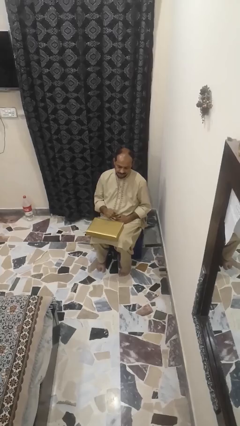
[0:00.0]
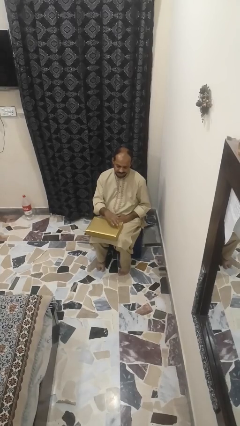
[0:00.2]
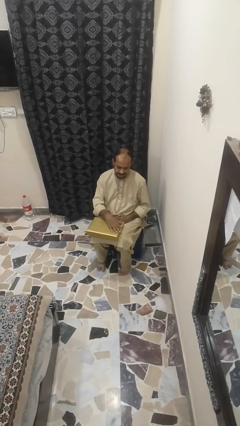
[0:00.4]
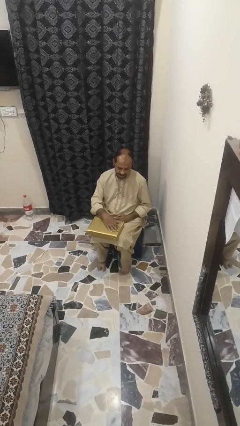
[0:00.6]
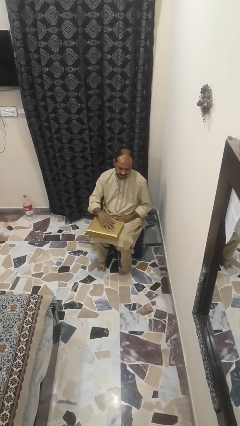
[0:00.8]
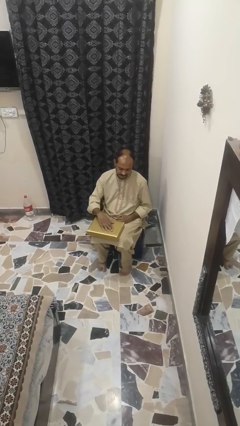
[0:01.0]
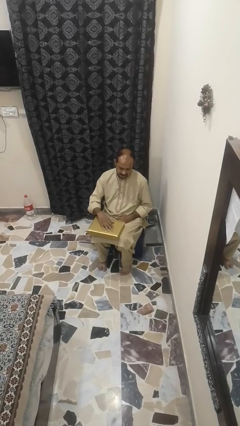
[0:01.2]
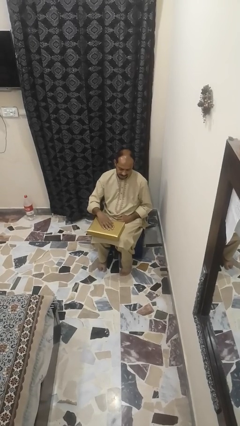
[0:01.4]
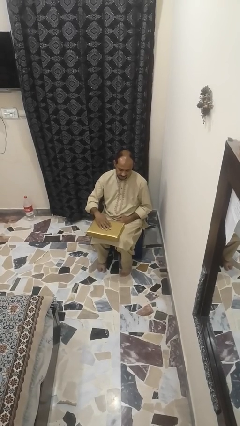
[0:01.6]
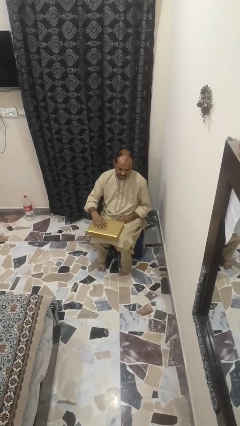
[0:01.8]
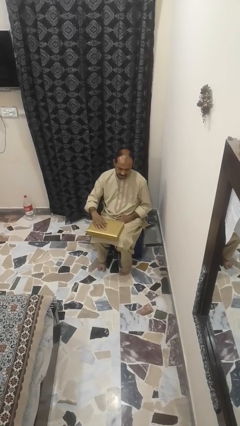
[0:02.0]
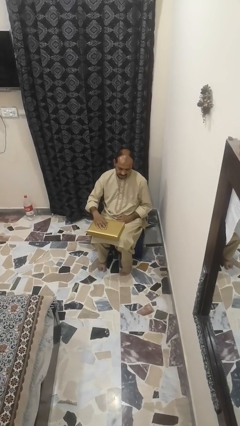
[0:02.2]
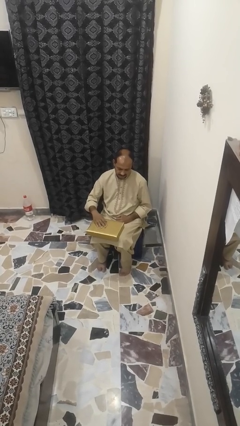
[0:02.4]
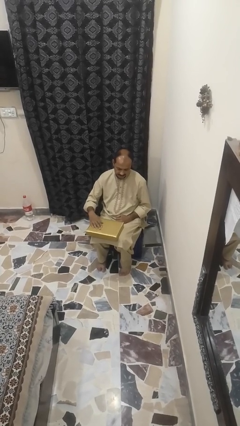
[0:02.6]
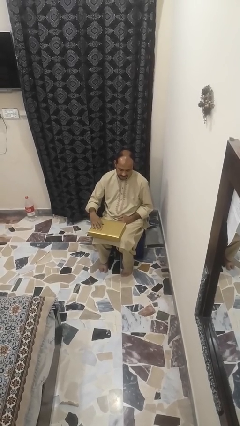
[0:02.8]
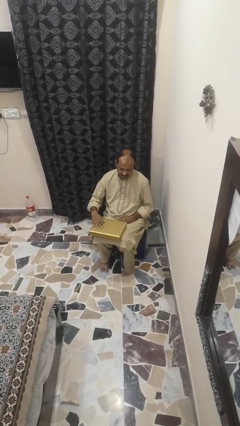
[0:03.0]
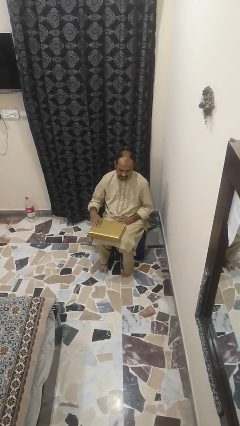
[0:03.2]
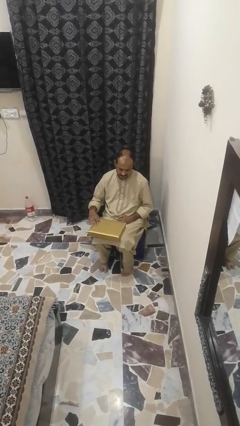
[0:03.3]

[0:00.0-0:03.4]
person waves hand over object

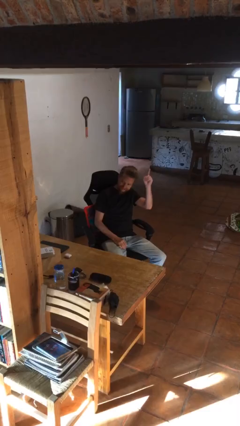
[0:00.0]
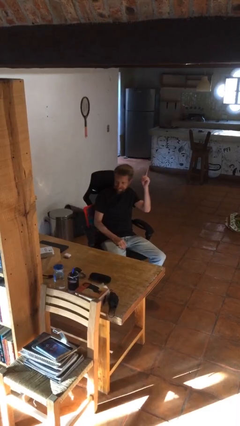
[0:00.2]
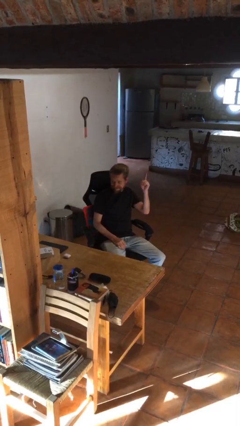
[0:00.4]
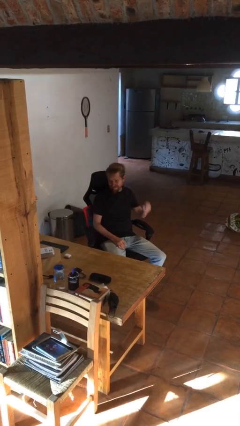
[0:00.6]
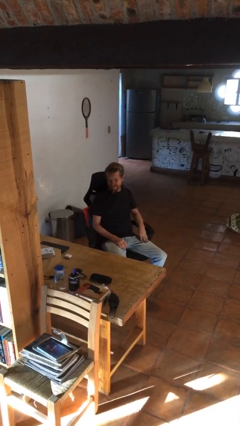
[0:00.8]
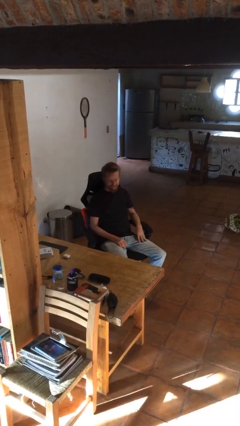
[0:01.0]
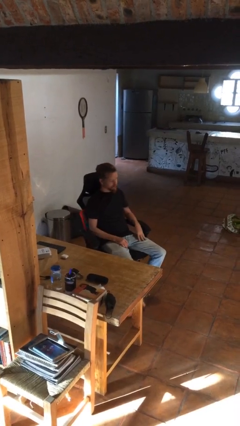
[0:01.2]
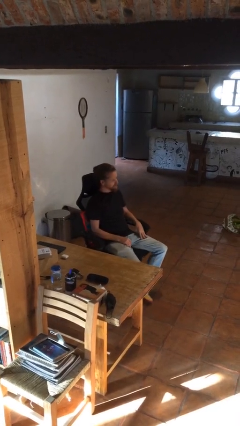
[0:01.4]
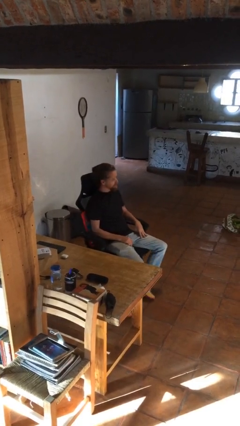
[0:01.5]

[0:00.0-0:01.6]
person gestures lower hand

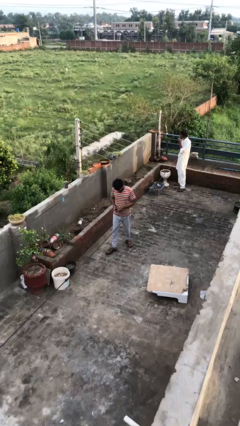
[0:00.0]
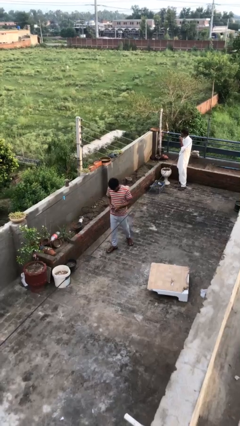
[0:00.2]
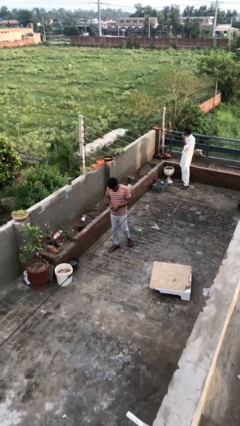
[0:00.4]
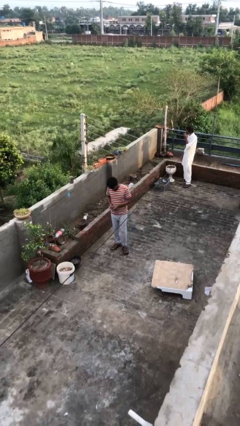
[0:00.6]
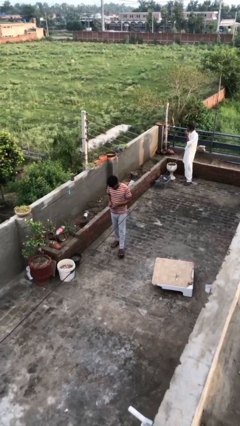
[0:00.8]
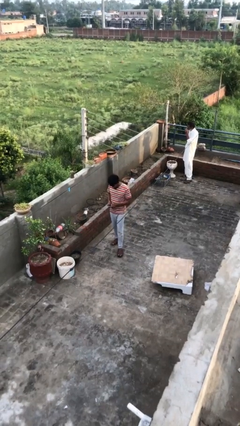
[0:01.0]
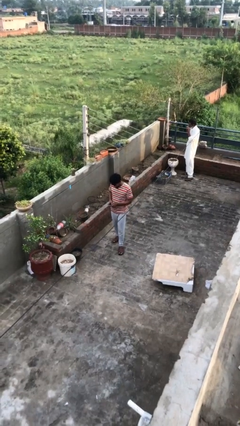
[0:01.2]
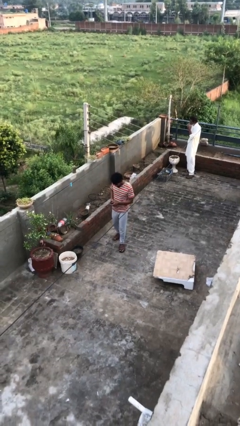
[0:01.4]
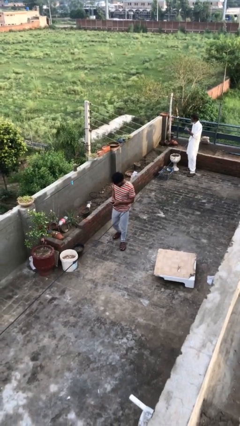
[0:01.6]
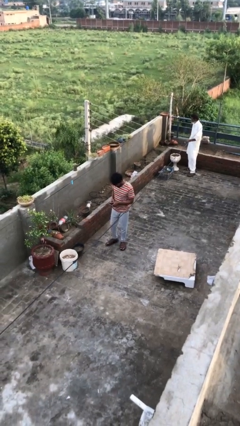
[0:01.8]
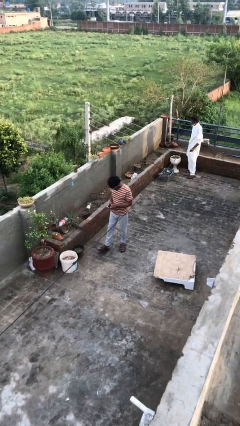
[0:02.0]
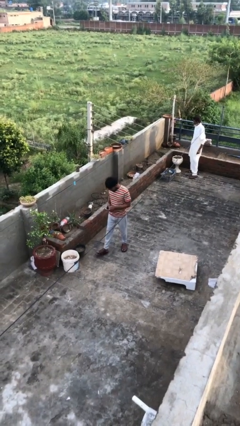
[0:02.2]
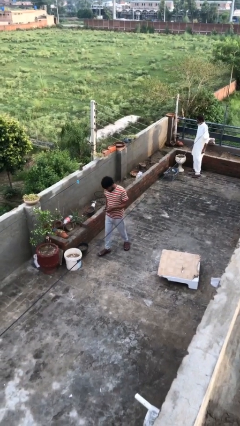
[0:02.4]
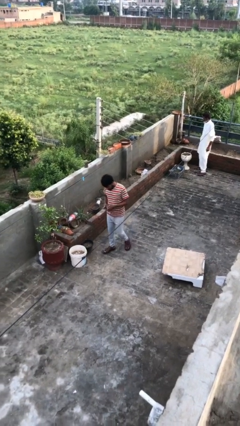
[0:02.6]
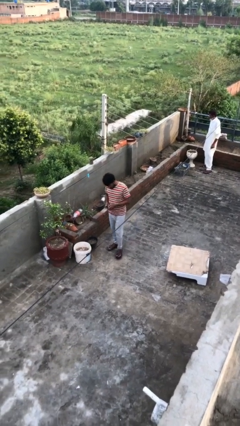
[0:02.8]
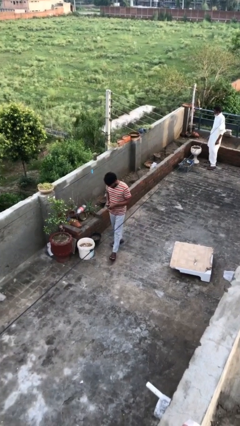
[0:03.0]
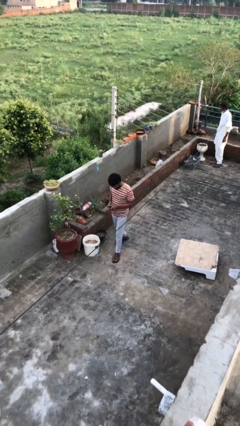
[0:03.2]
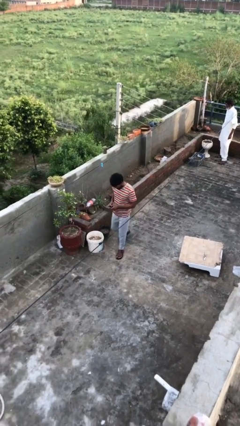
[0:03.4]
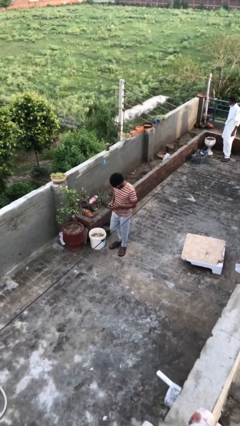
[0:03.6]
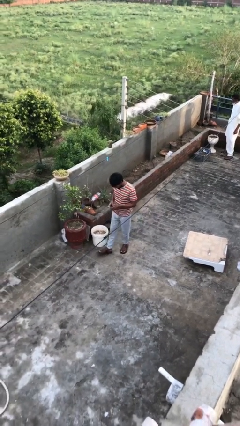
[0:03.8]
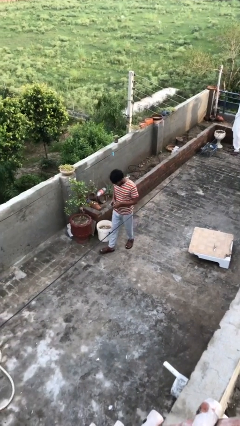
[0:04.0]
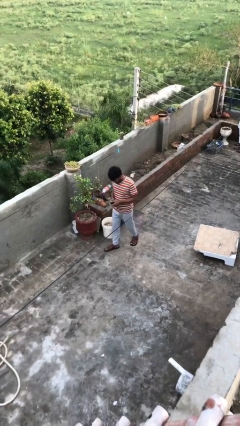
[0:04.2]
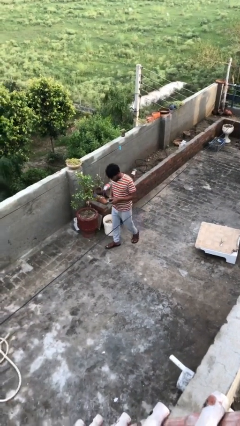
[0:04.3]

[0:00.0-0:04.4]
person texts on phone

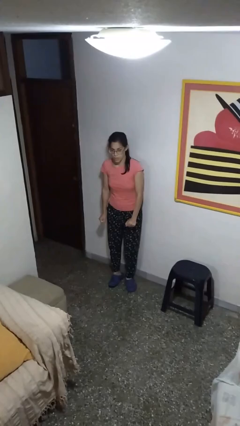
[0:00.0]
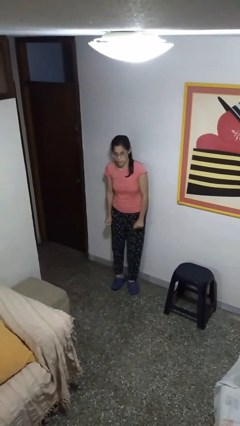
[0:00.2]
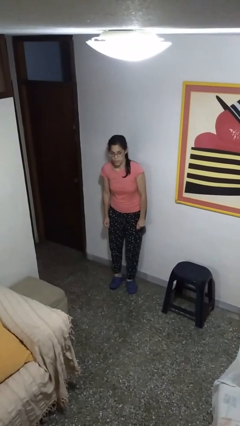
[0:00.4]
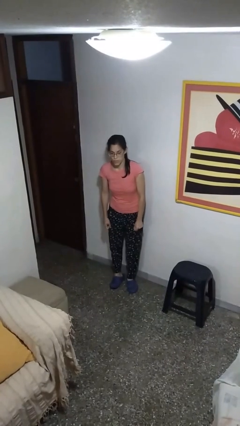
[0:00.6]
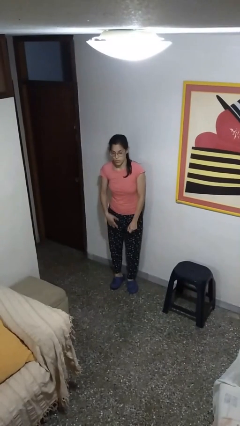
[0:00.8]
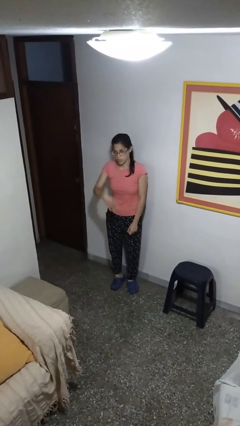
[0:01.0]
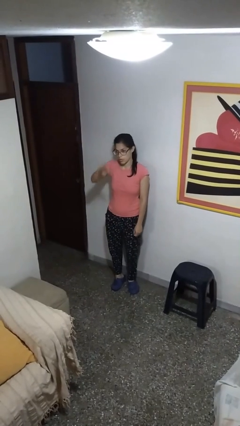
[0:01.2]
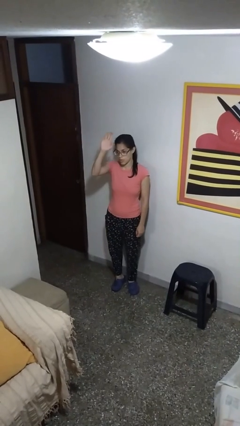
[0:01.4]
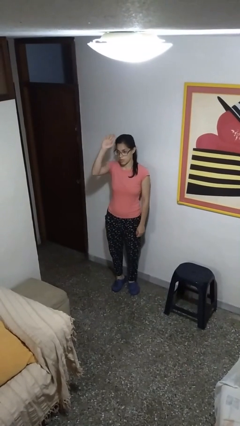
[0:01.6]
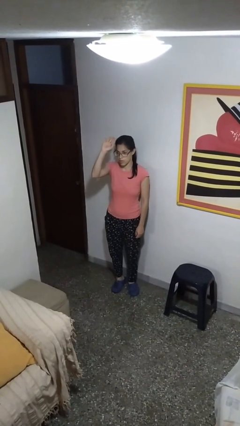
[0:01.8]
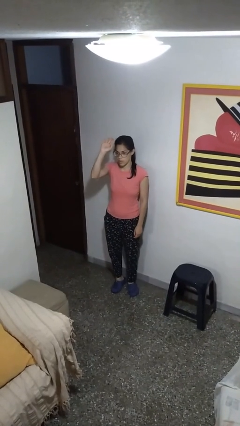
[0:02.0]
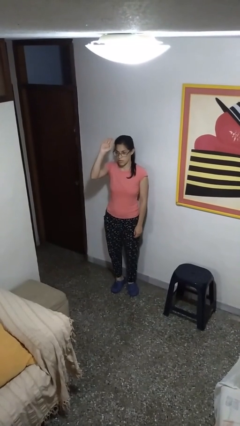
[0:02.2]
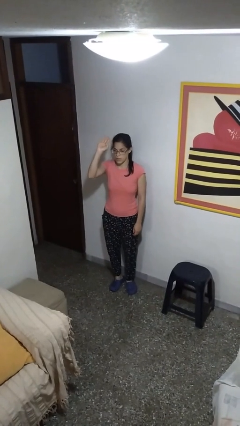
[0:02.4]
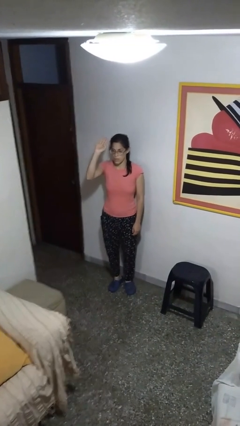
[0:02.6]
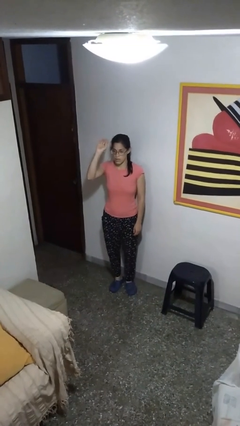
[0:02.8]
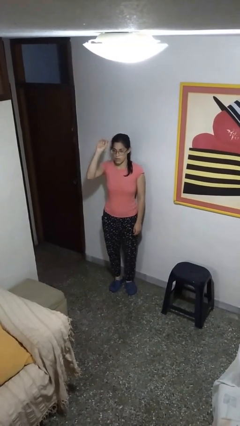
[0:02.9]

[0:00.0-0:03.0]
person gestures swipe up

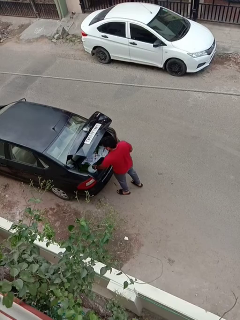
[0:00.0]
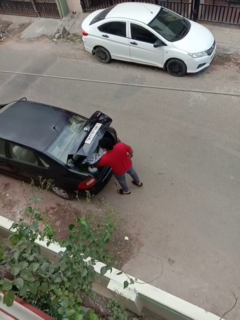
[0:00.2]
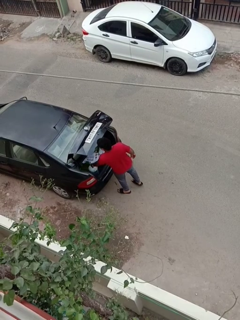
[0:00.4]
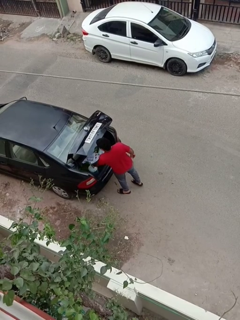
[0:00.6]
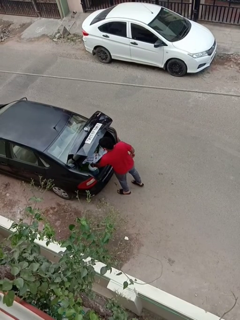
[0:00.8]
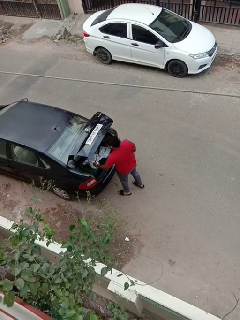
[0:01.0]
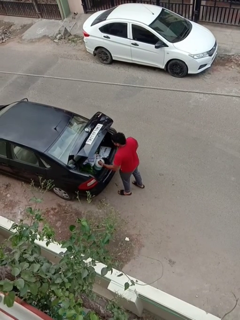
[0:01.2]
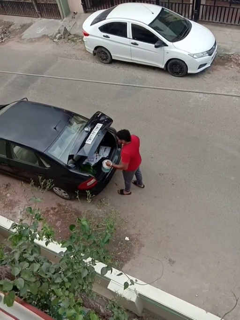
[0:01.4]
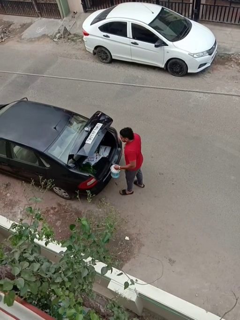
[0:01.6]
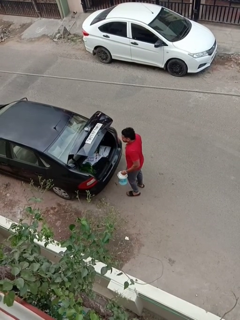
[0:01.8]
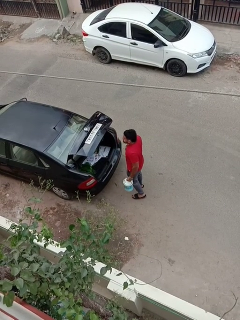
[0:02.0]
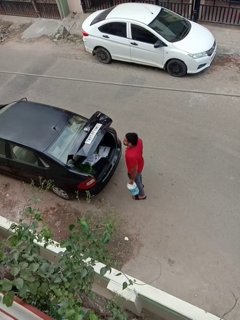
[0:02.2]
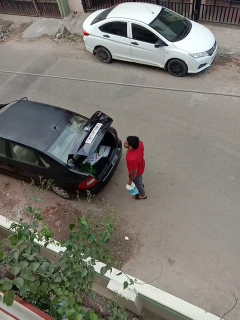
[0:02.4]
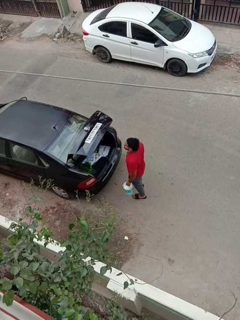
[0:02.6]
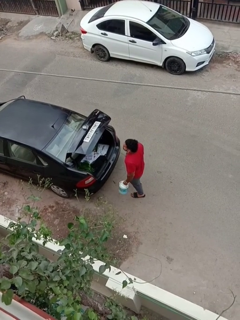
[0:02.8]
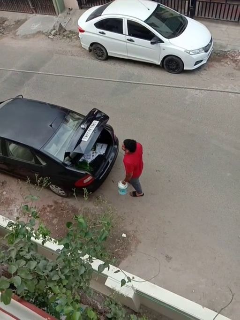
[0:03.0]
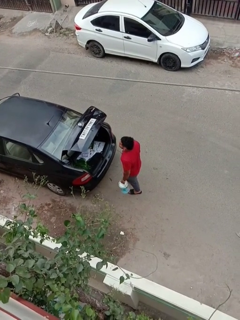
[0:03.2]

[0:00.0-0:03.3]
person unloads car

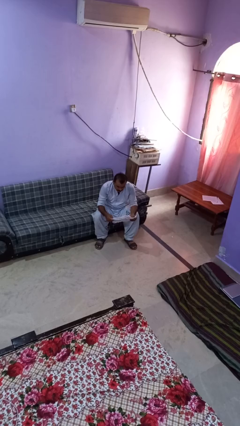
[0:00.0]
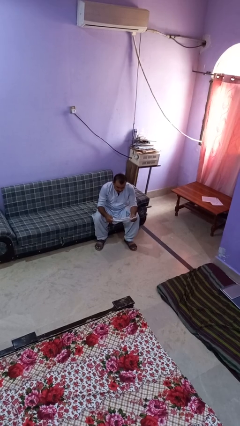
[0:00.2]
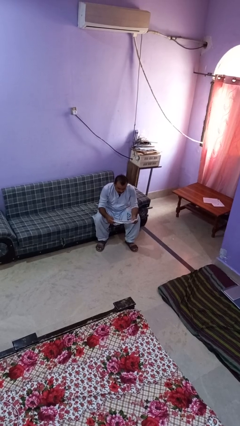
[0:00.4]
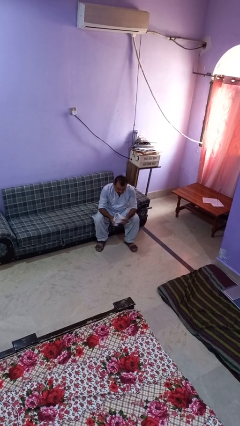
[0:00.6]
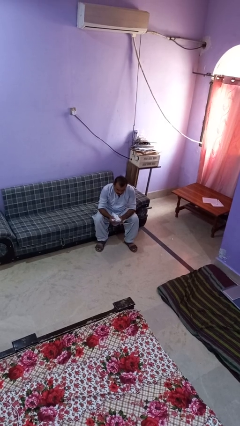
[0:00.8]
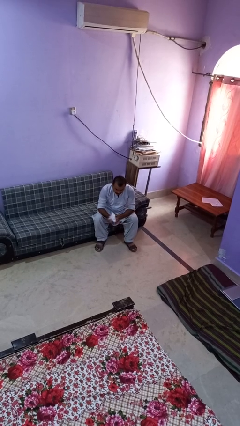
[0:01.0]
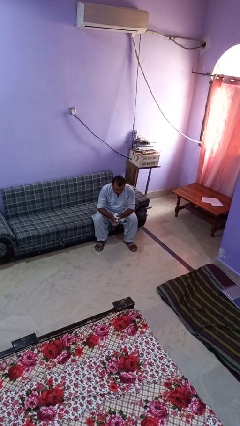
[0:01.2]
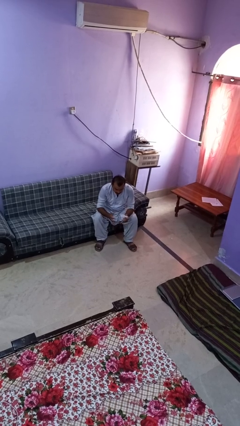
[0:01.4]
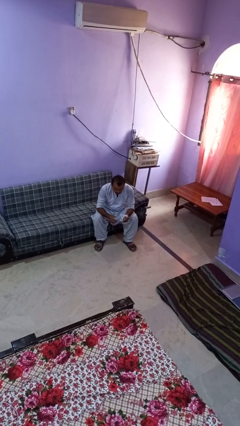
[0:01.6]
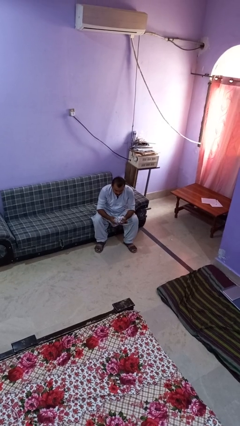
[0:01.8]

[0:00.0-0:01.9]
person crumples paper

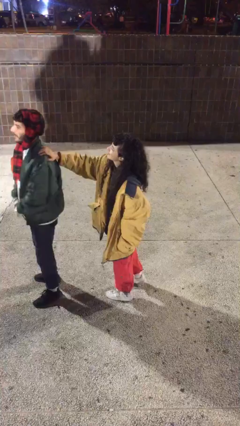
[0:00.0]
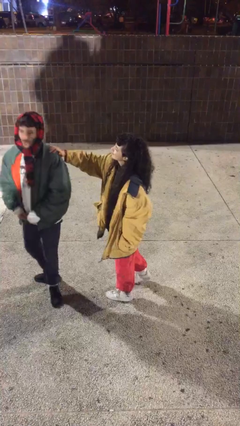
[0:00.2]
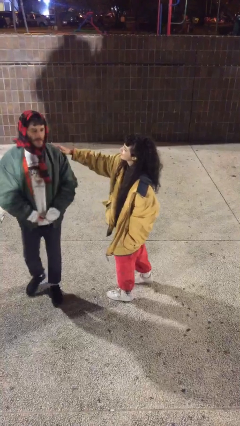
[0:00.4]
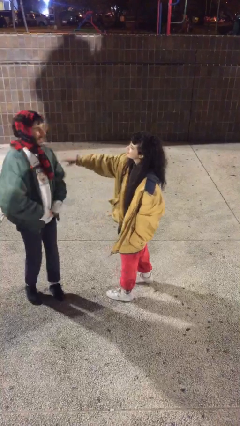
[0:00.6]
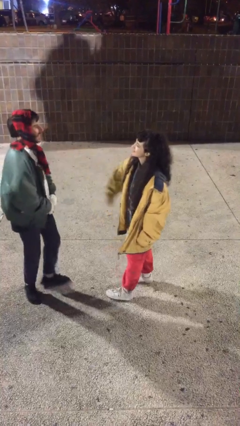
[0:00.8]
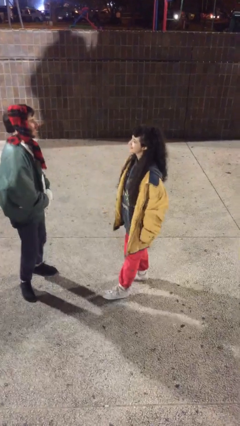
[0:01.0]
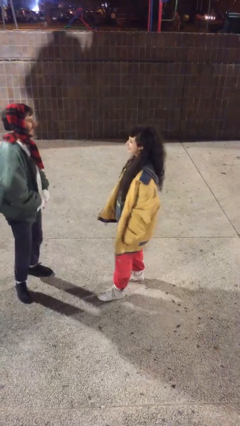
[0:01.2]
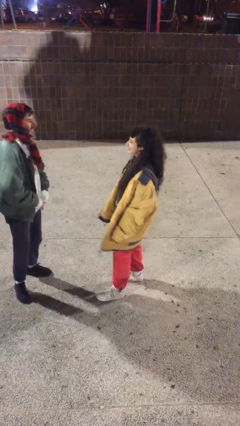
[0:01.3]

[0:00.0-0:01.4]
person spins person around
